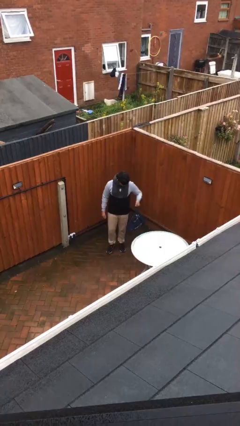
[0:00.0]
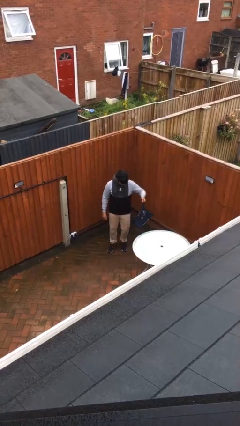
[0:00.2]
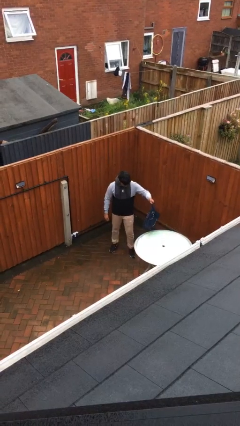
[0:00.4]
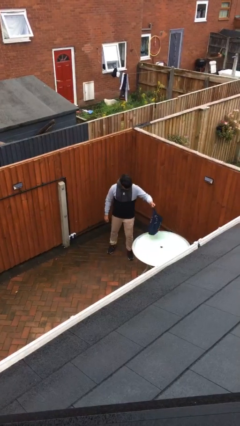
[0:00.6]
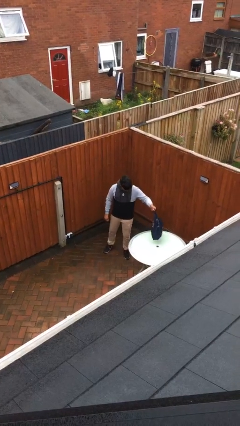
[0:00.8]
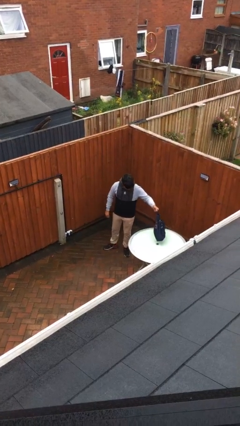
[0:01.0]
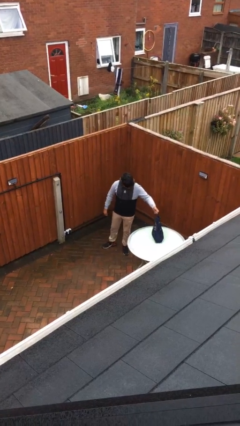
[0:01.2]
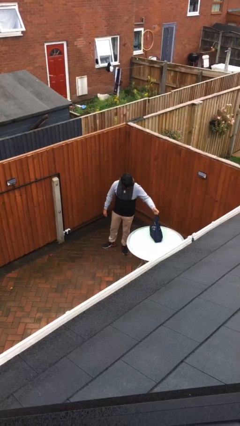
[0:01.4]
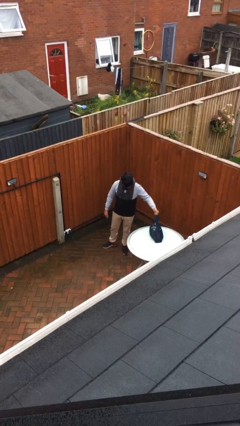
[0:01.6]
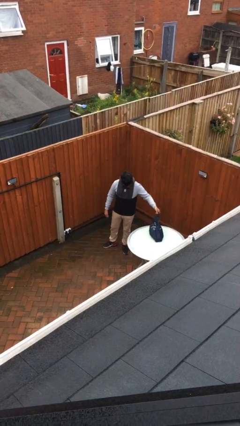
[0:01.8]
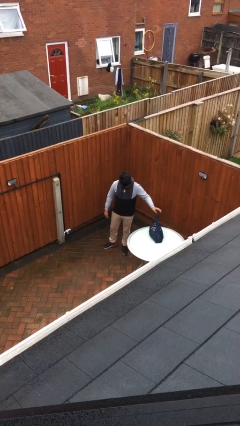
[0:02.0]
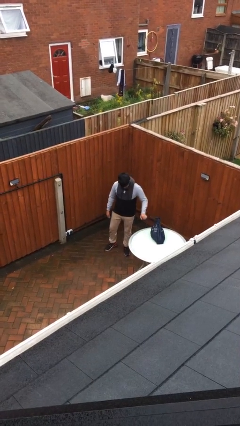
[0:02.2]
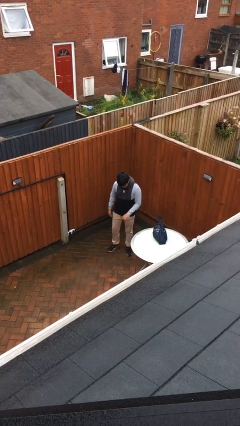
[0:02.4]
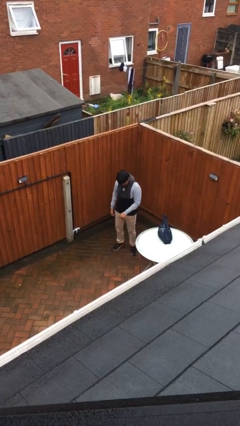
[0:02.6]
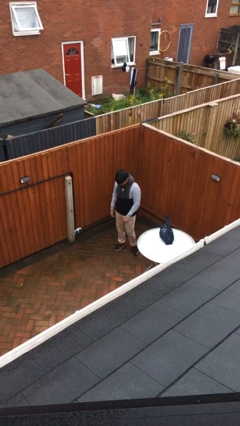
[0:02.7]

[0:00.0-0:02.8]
person puts down object on table

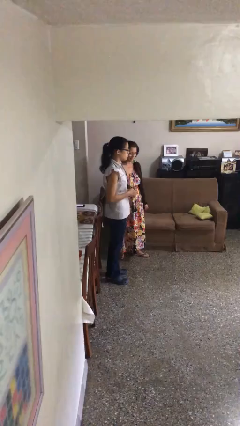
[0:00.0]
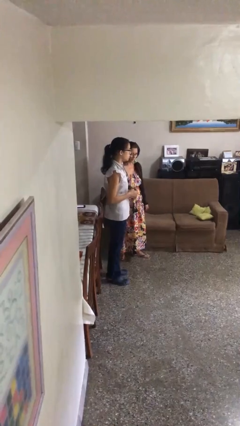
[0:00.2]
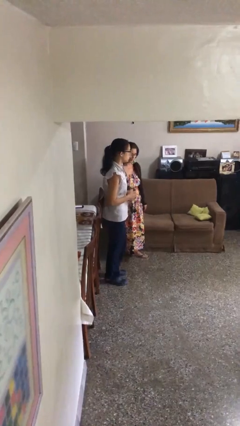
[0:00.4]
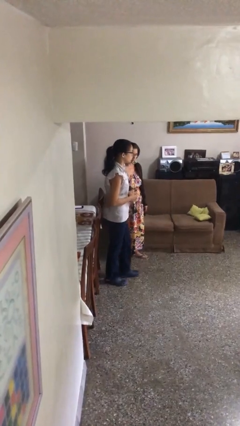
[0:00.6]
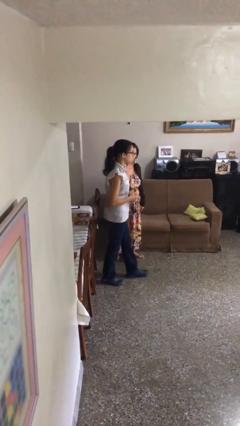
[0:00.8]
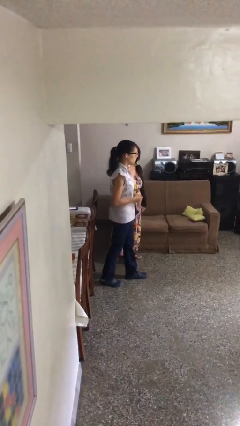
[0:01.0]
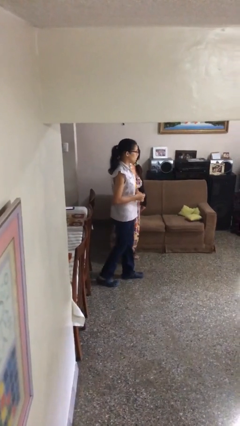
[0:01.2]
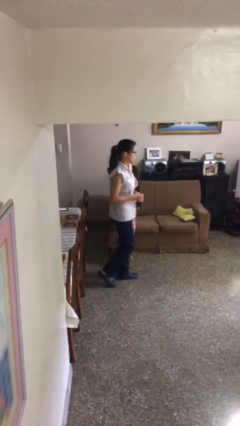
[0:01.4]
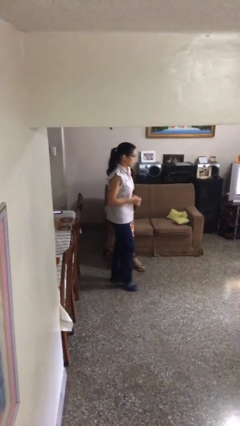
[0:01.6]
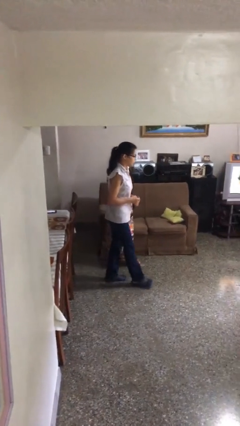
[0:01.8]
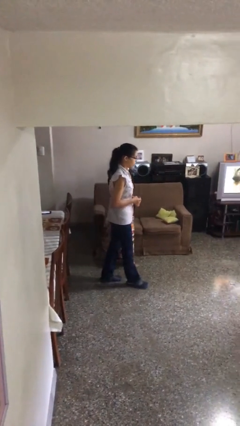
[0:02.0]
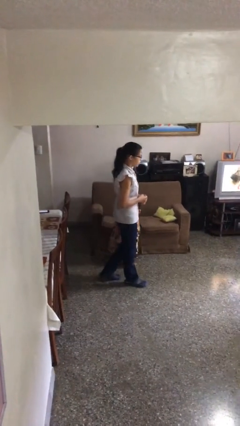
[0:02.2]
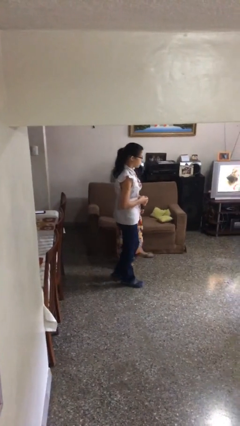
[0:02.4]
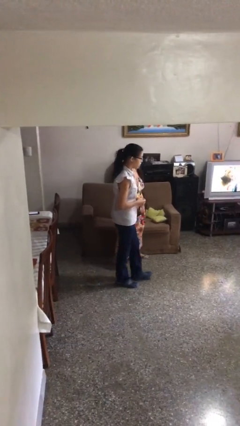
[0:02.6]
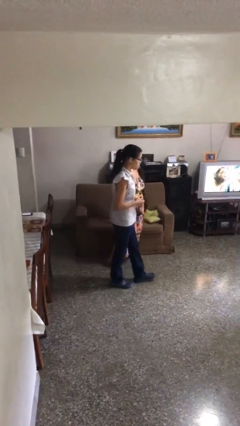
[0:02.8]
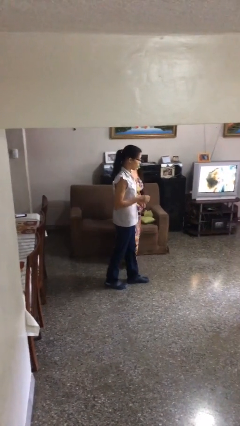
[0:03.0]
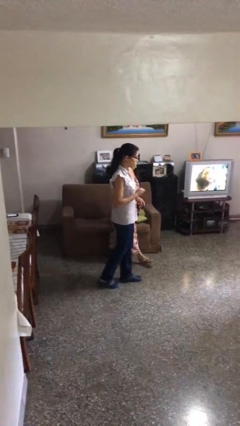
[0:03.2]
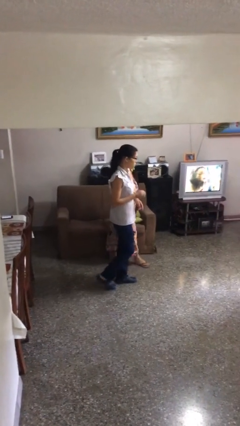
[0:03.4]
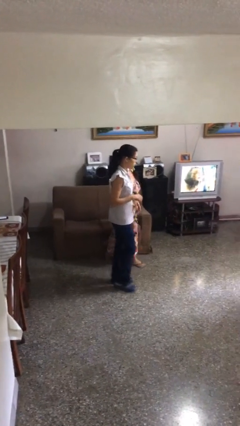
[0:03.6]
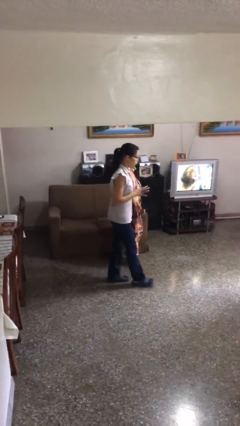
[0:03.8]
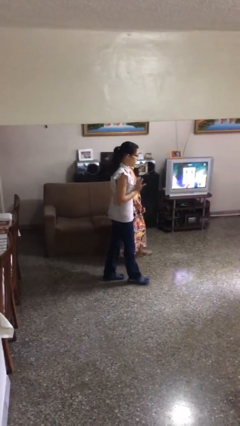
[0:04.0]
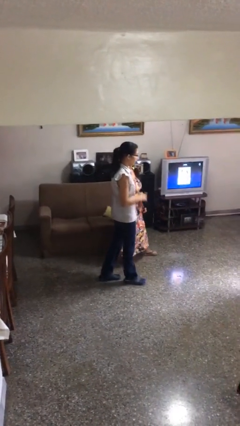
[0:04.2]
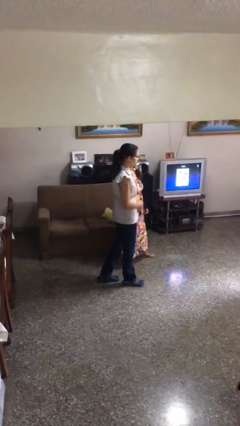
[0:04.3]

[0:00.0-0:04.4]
person talks to person

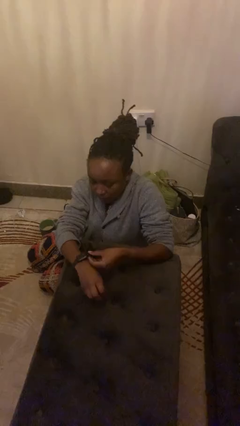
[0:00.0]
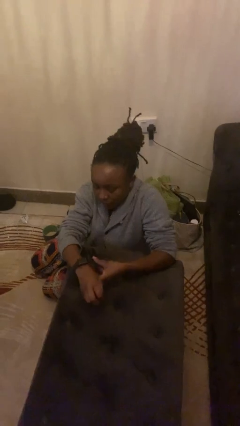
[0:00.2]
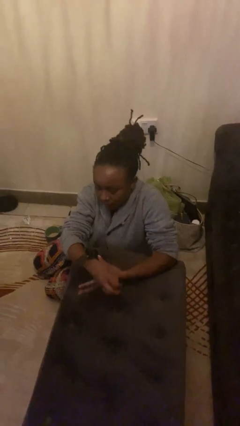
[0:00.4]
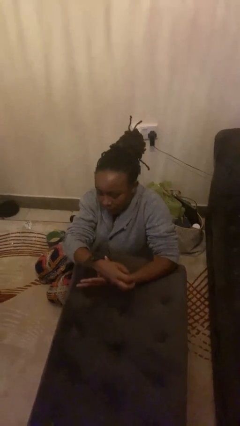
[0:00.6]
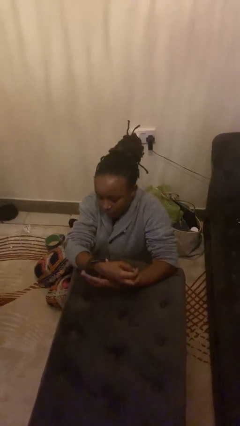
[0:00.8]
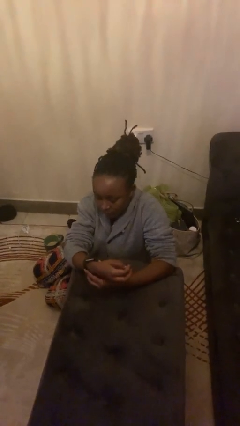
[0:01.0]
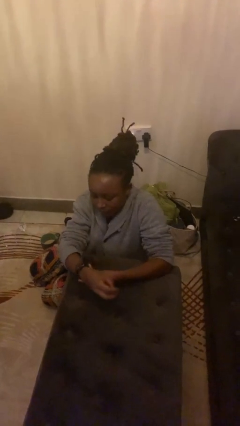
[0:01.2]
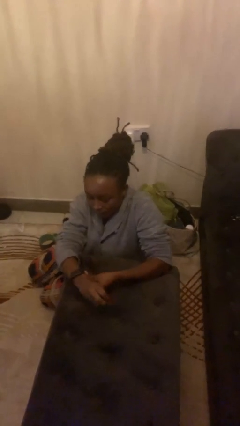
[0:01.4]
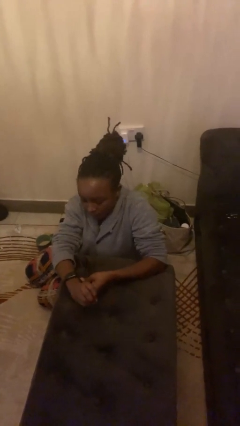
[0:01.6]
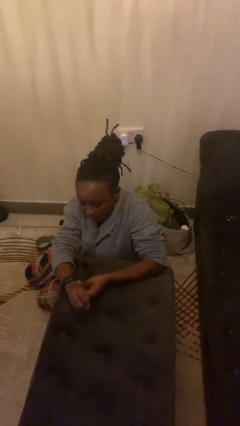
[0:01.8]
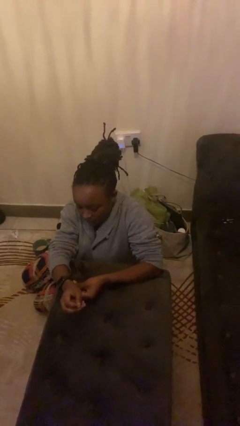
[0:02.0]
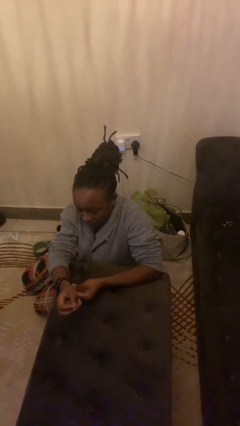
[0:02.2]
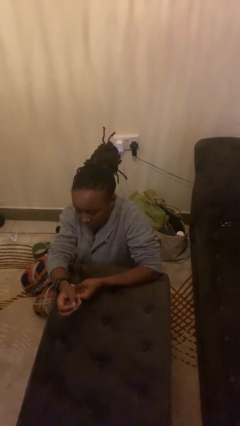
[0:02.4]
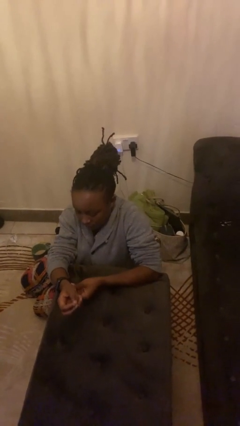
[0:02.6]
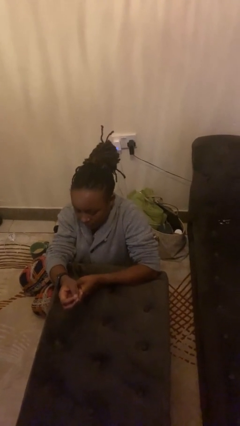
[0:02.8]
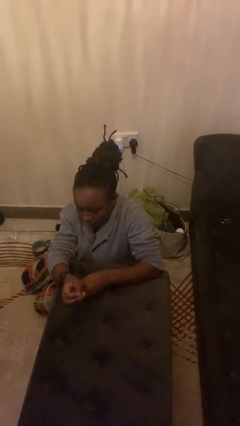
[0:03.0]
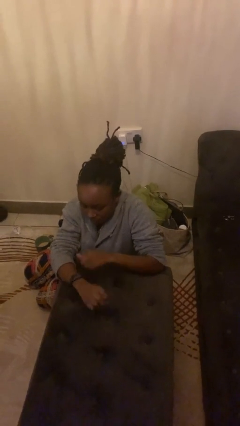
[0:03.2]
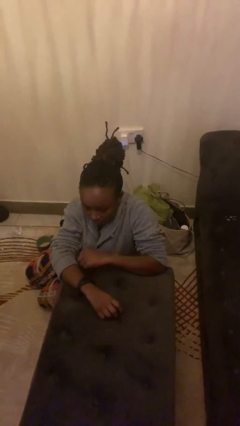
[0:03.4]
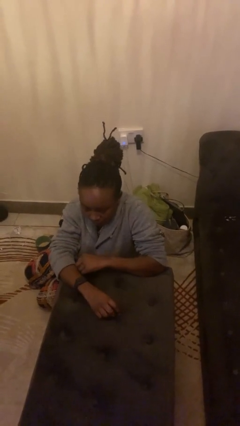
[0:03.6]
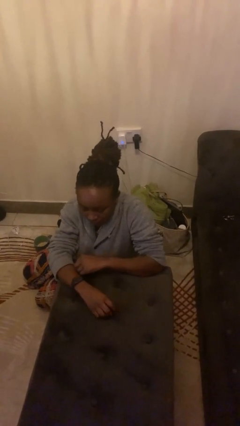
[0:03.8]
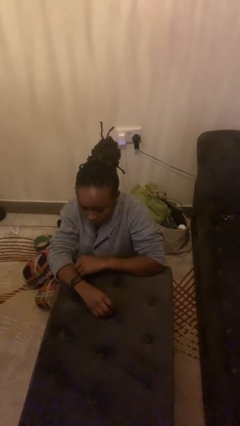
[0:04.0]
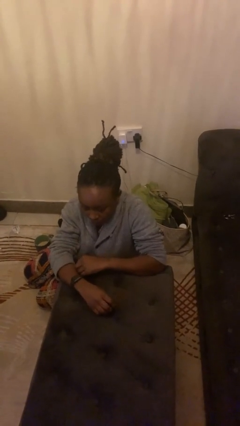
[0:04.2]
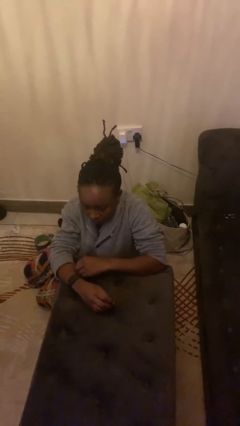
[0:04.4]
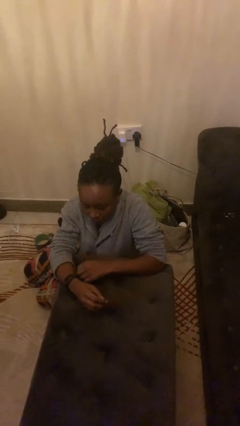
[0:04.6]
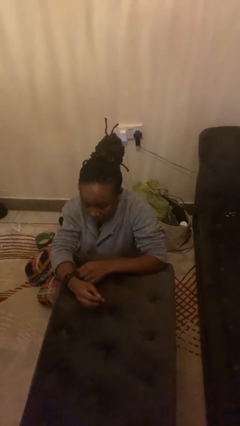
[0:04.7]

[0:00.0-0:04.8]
person puts on wristwatch

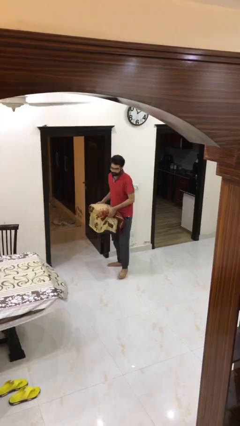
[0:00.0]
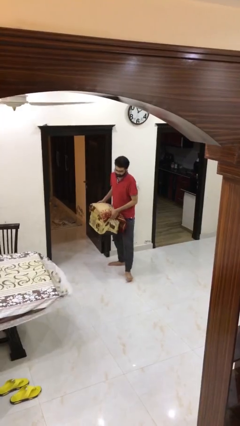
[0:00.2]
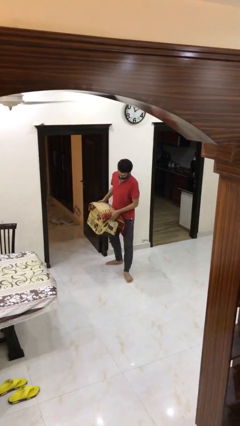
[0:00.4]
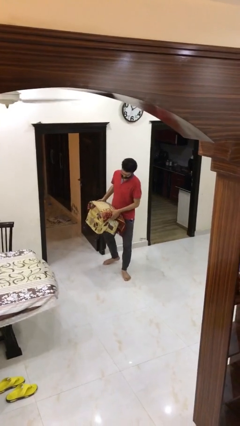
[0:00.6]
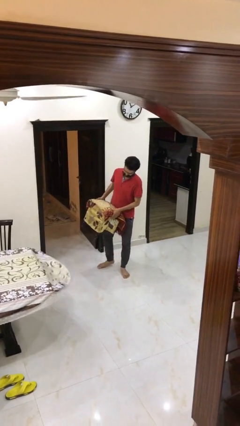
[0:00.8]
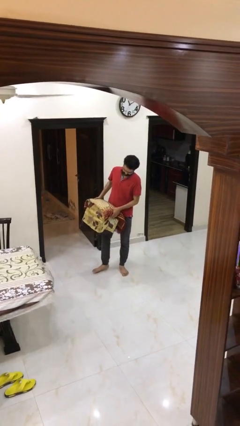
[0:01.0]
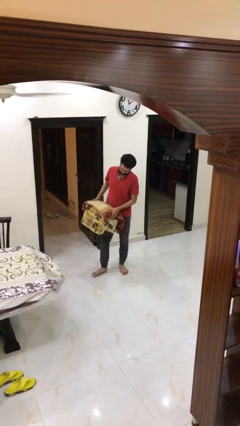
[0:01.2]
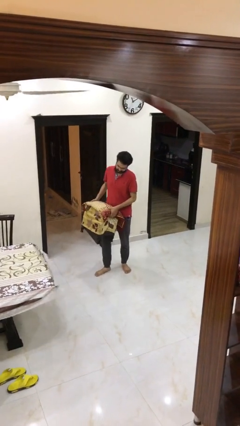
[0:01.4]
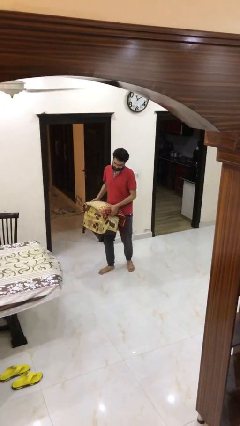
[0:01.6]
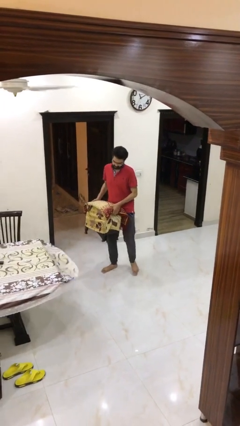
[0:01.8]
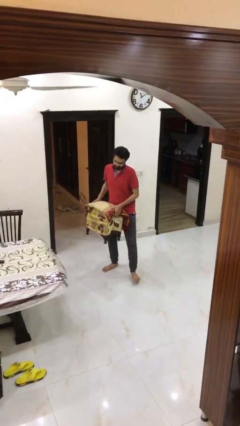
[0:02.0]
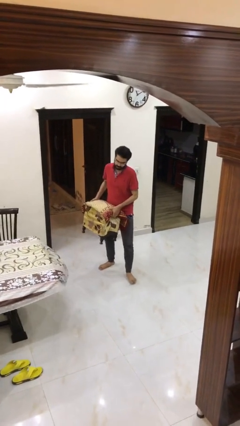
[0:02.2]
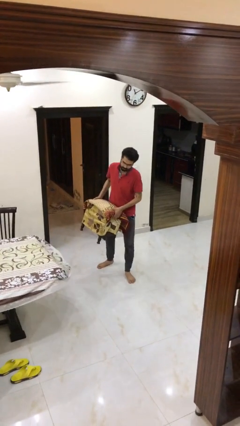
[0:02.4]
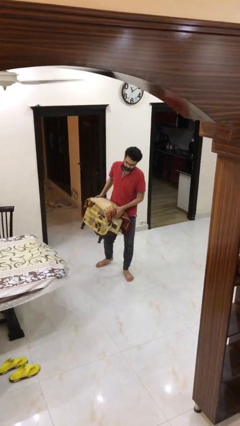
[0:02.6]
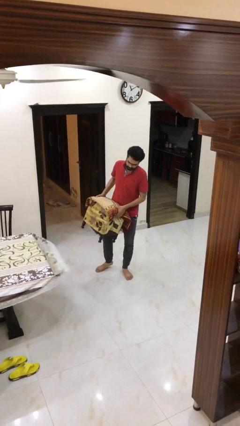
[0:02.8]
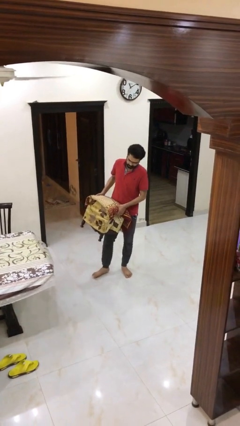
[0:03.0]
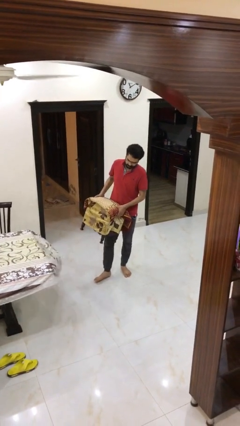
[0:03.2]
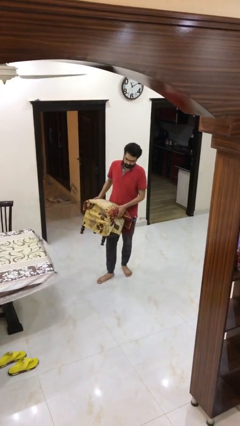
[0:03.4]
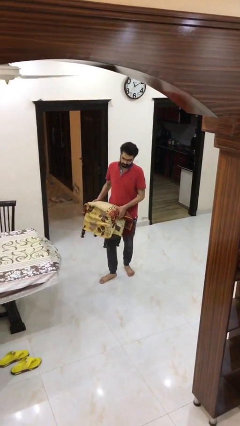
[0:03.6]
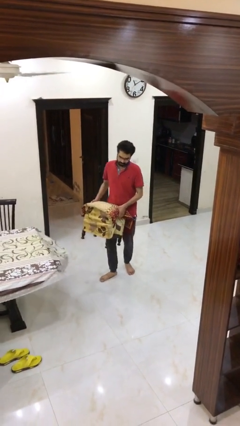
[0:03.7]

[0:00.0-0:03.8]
person carries heavy object

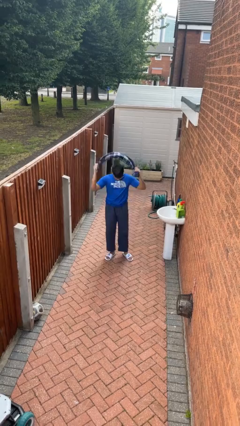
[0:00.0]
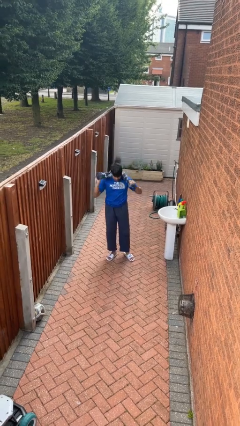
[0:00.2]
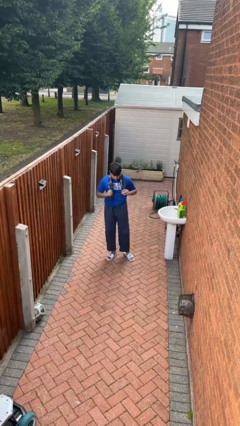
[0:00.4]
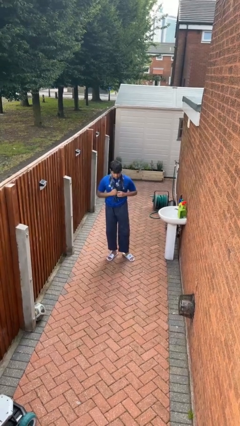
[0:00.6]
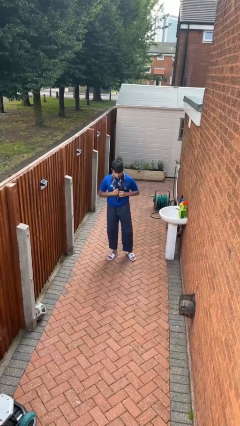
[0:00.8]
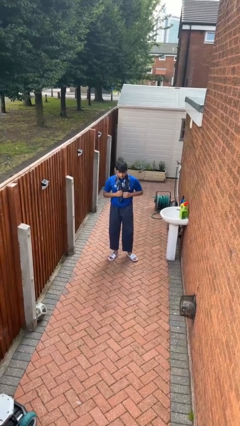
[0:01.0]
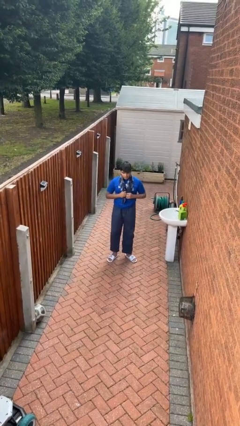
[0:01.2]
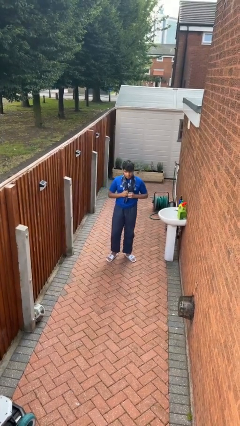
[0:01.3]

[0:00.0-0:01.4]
person puts on scarf

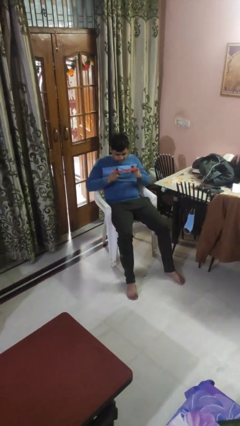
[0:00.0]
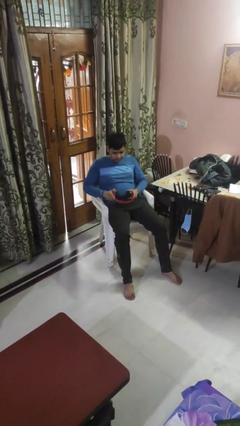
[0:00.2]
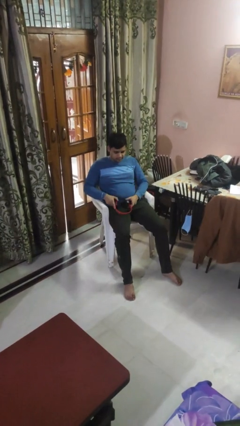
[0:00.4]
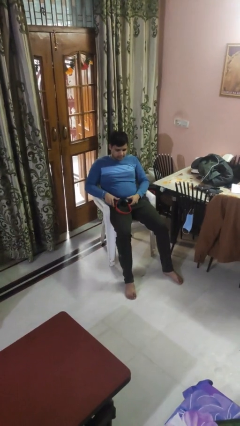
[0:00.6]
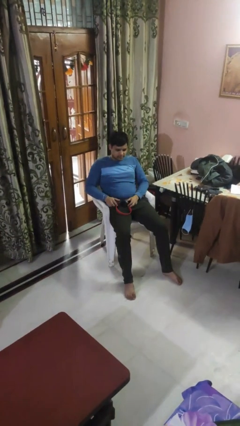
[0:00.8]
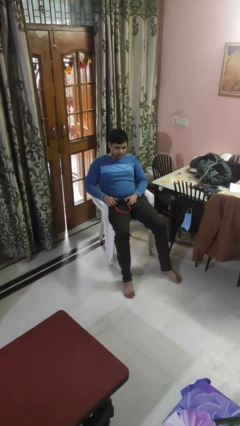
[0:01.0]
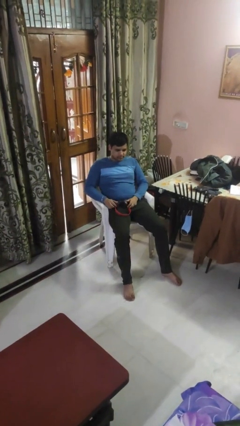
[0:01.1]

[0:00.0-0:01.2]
person takes off headphones
